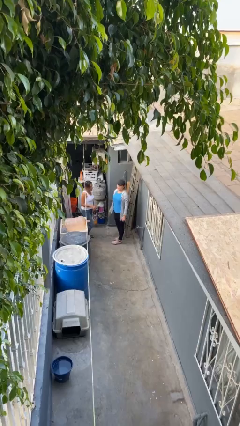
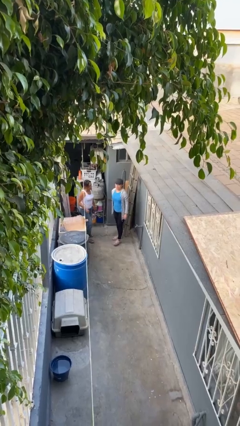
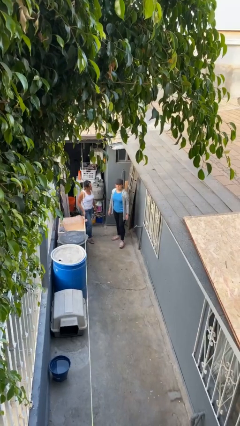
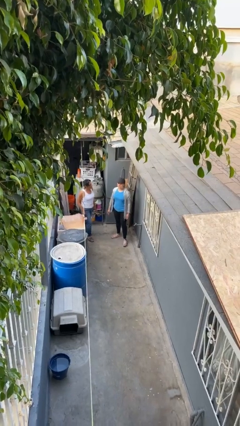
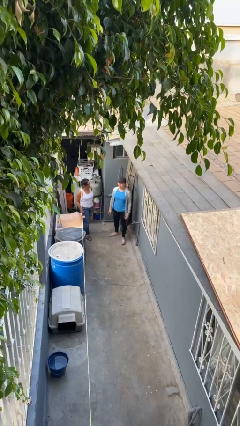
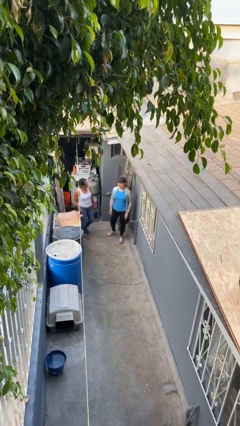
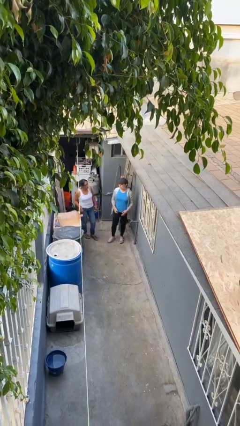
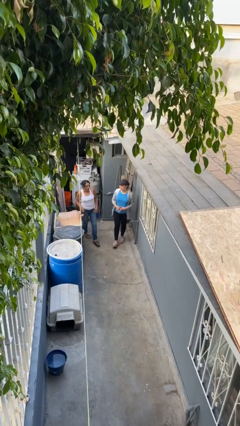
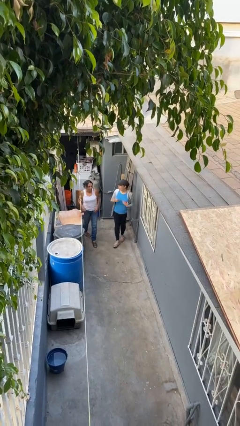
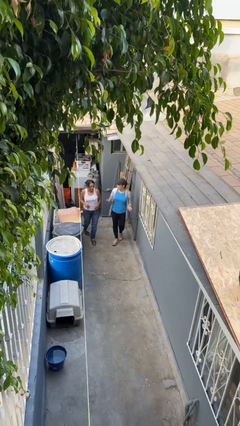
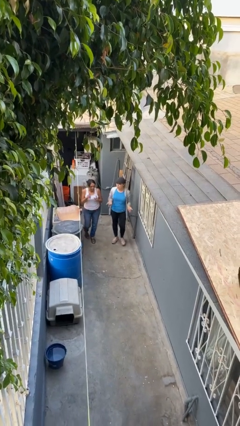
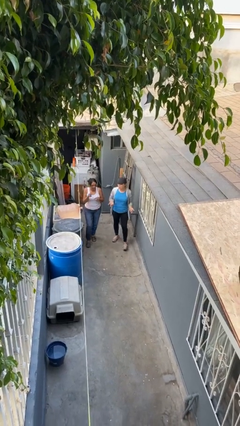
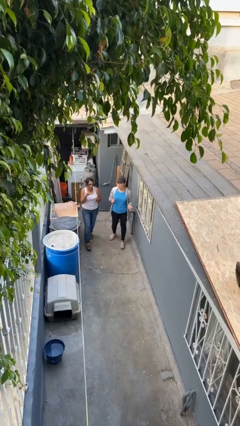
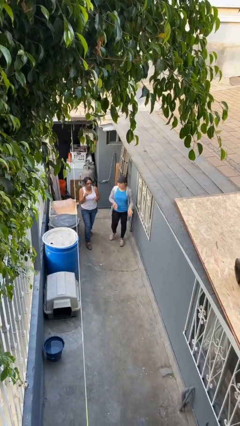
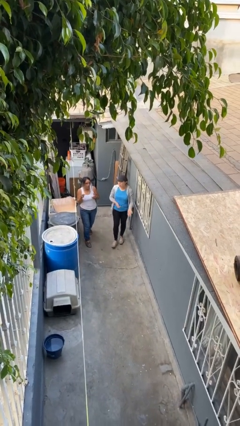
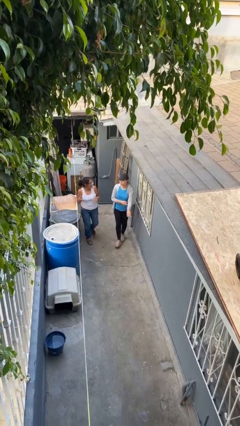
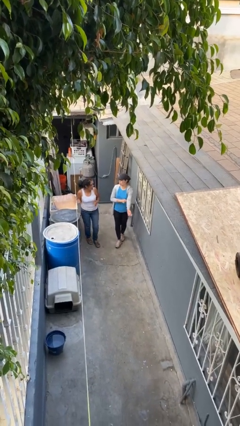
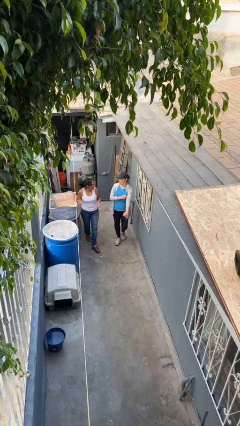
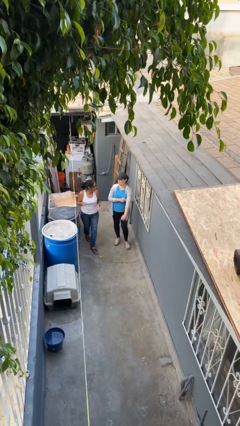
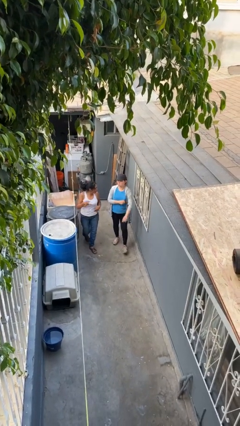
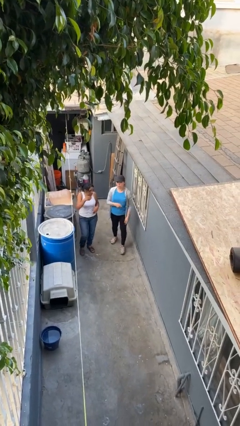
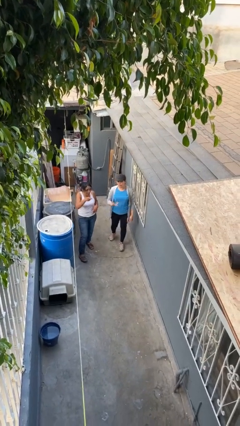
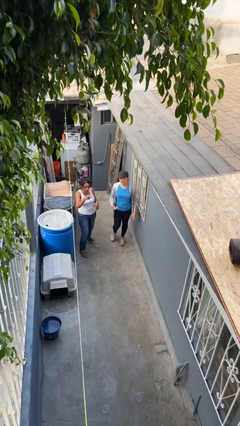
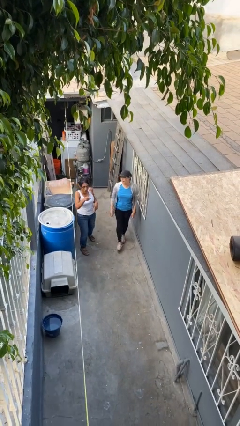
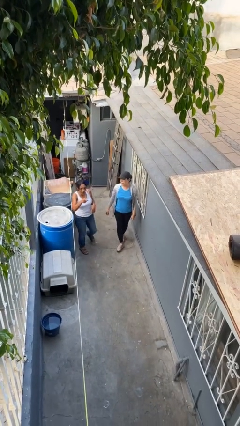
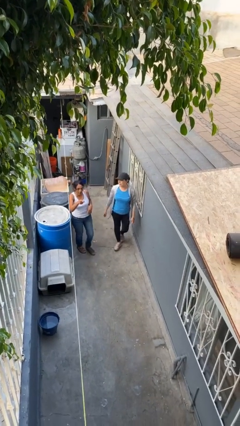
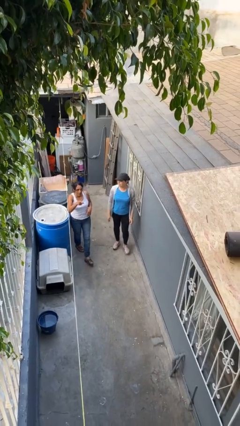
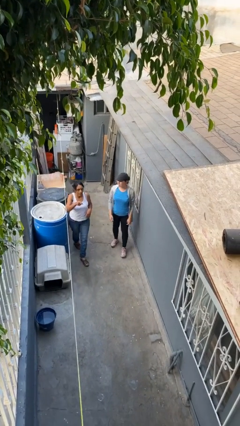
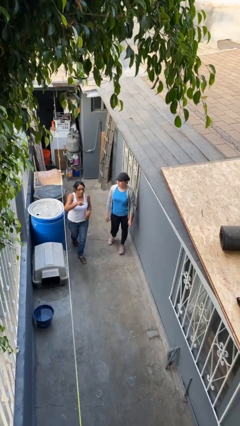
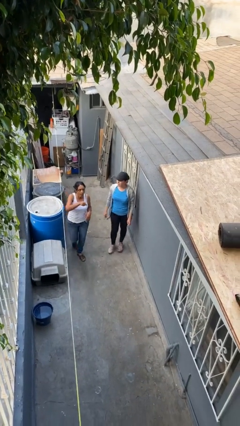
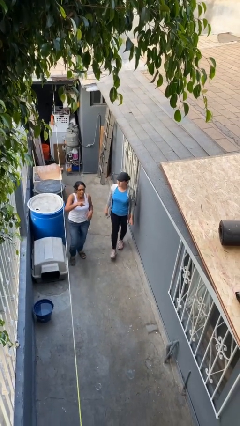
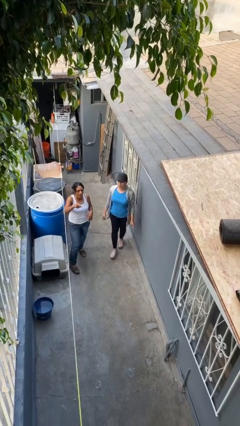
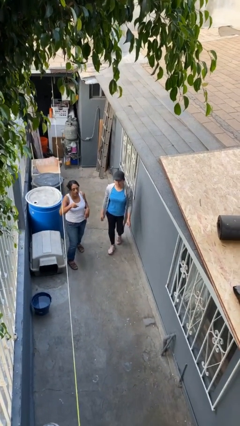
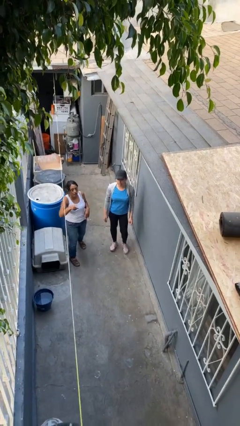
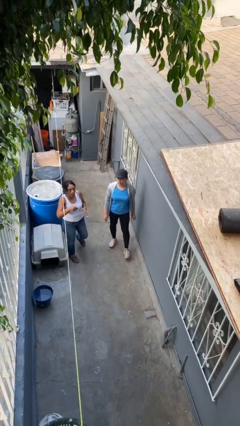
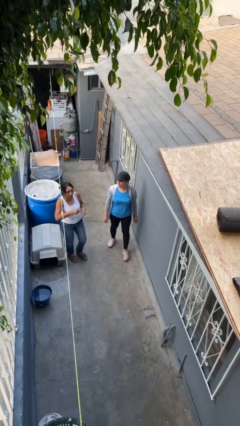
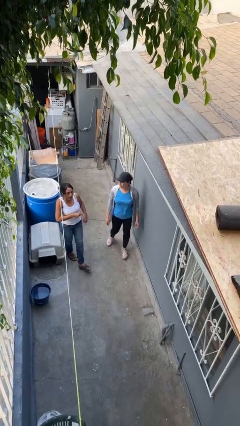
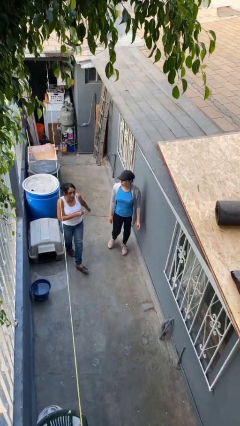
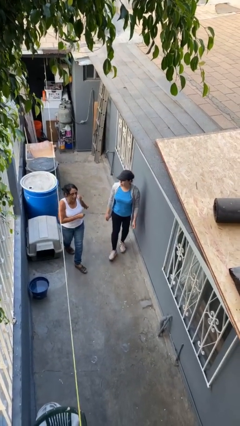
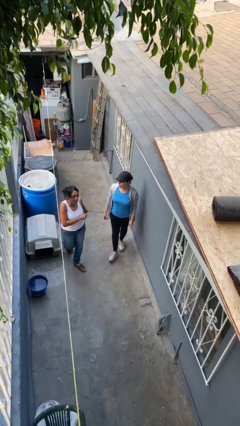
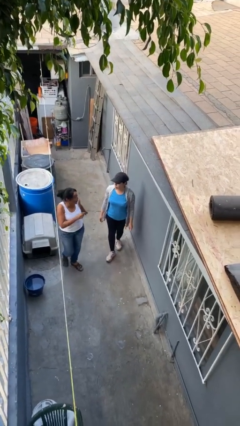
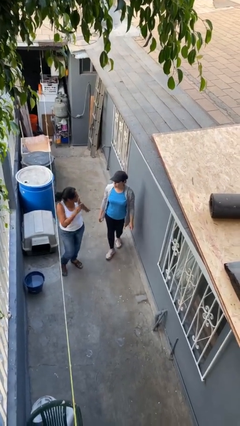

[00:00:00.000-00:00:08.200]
person talks to person

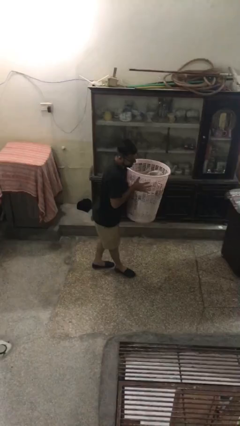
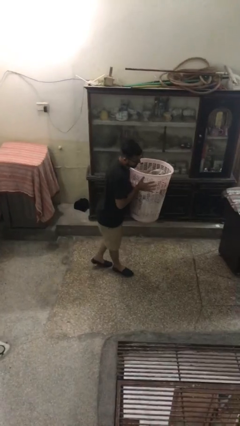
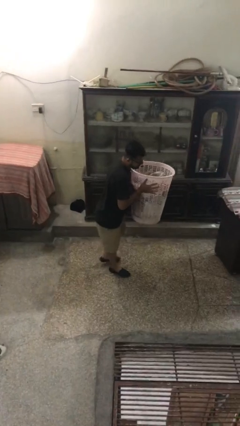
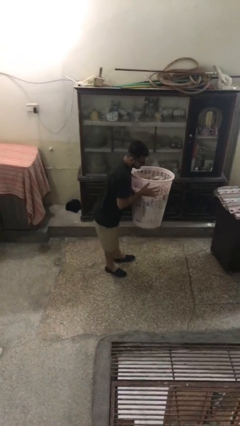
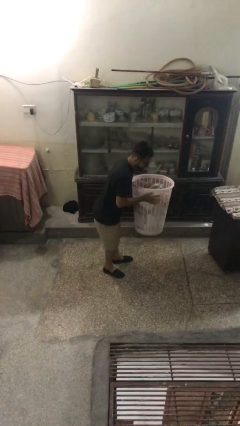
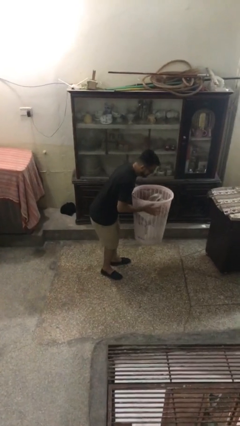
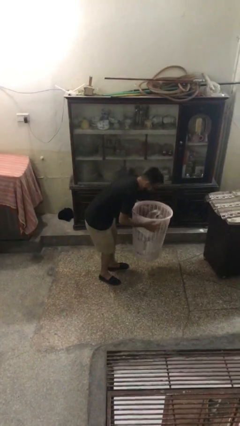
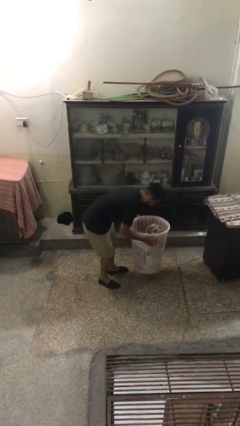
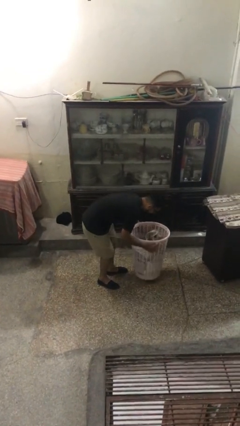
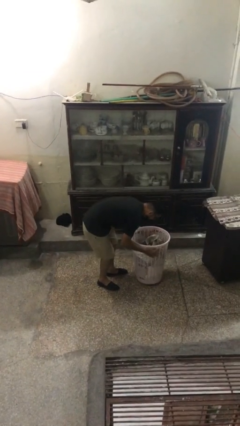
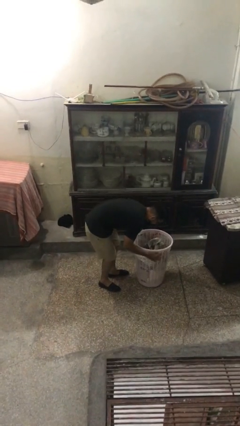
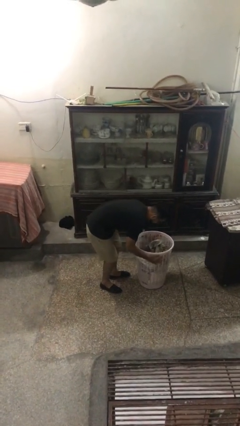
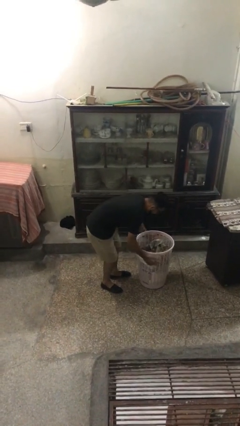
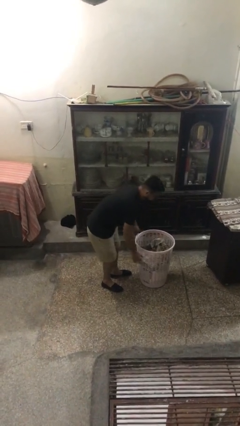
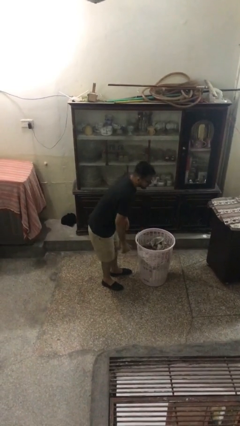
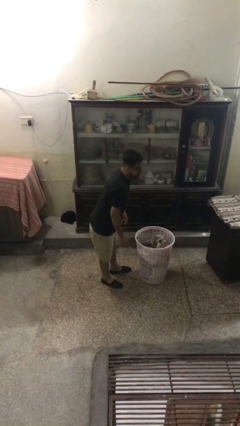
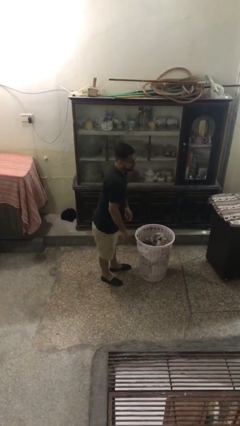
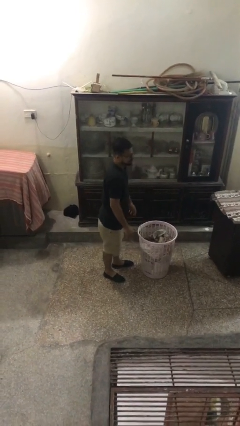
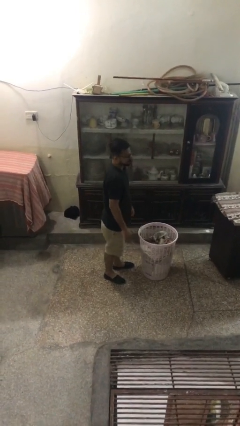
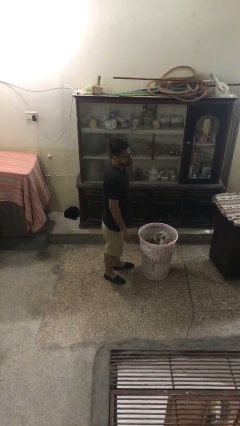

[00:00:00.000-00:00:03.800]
person puts down object on floor

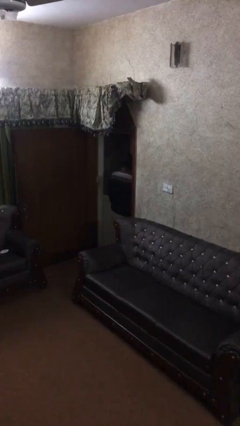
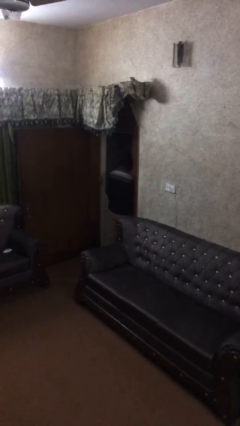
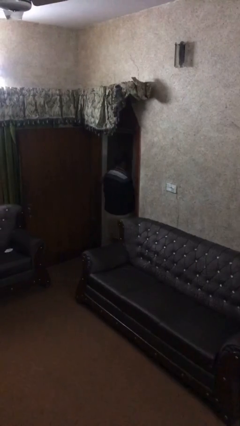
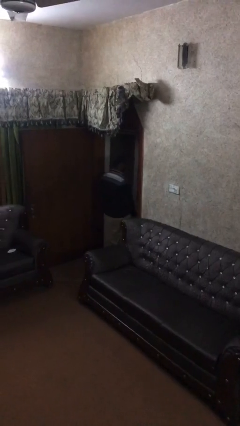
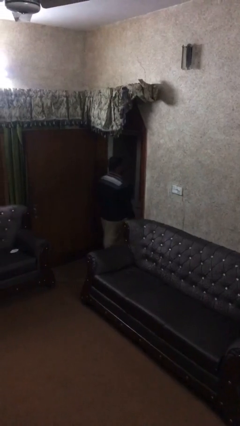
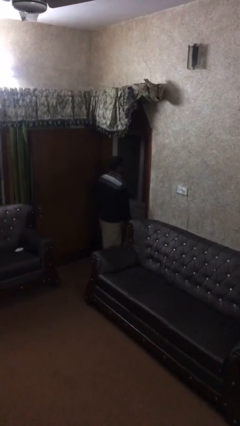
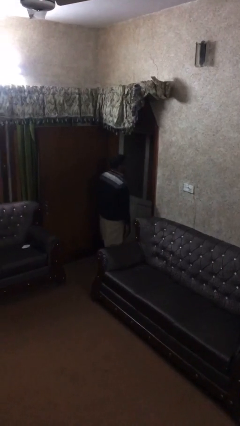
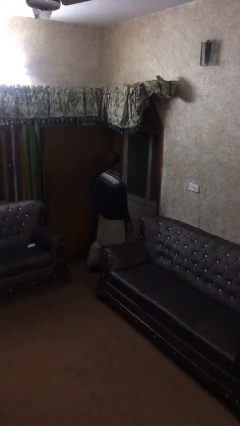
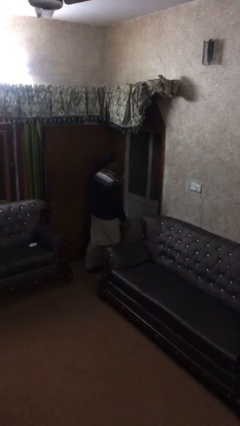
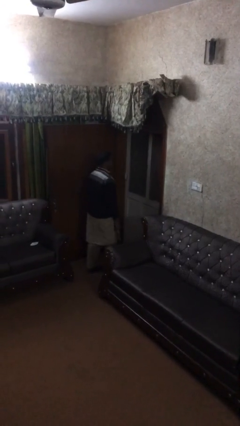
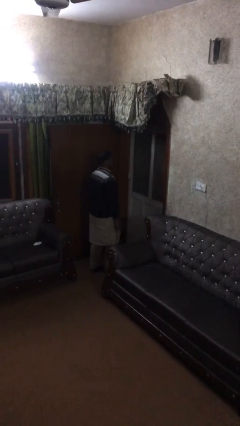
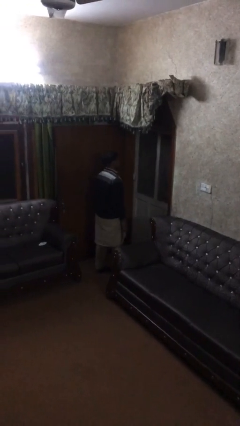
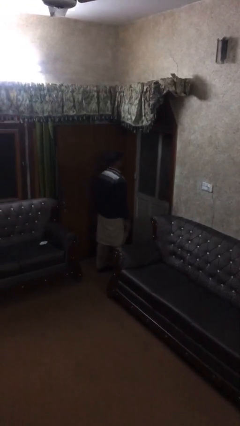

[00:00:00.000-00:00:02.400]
person closes facility door

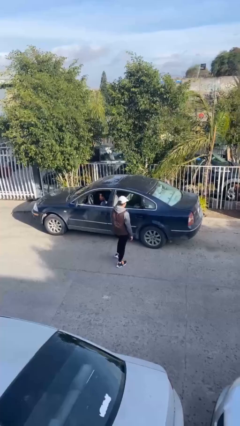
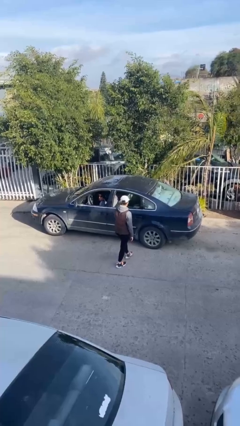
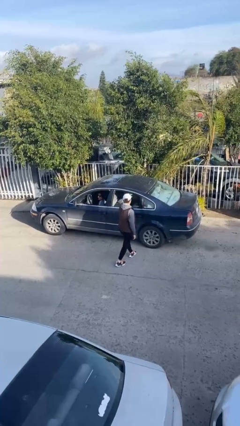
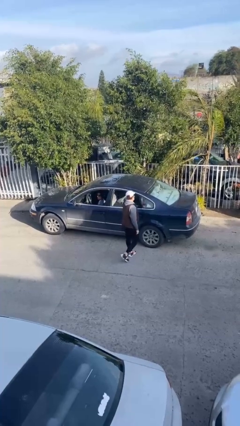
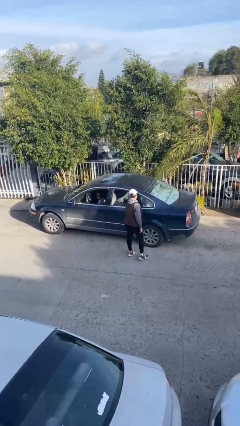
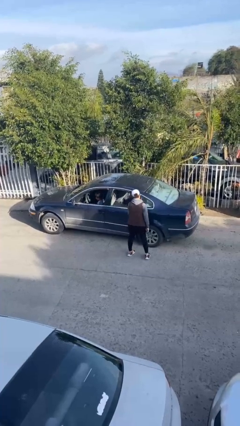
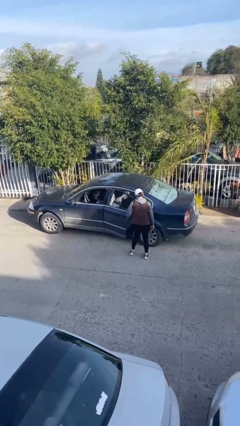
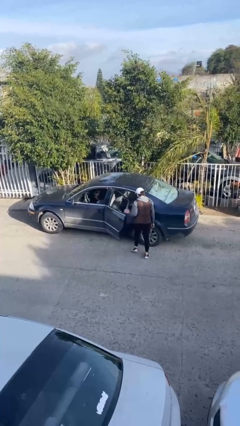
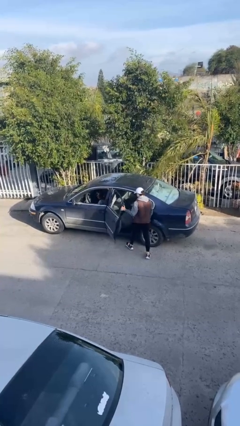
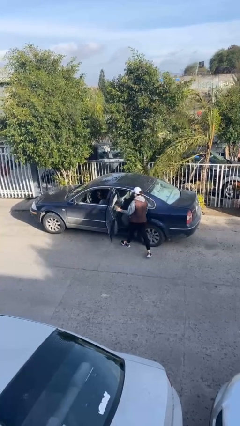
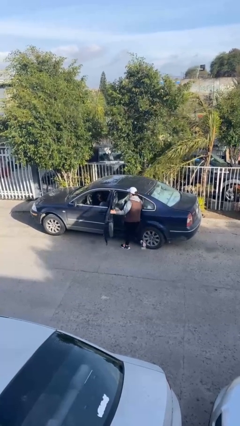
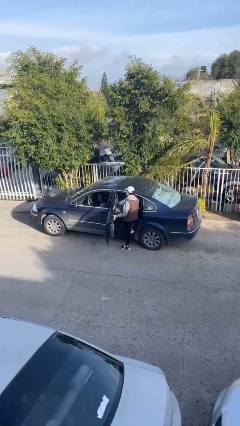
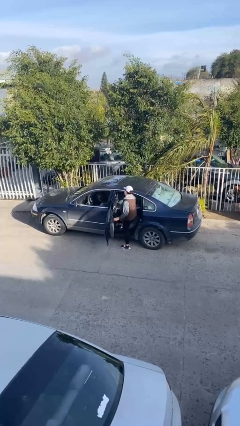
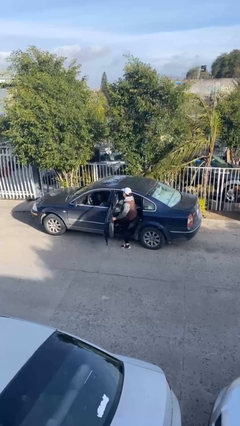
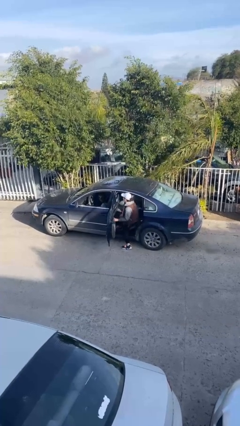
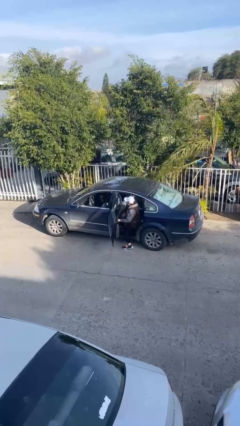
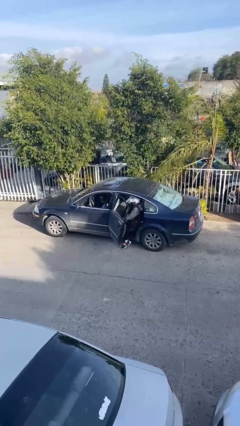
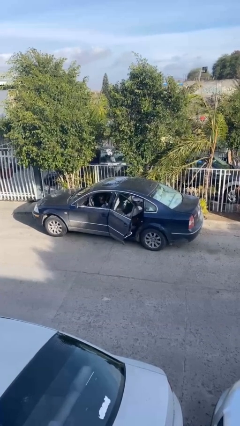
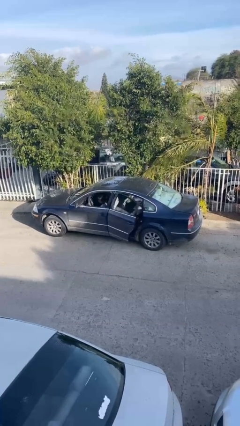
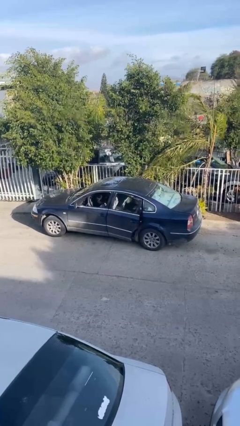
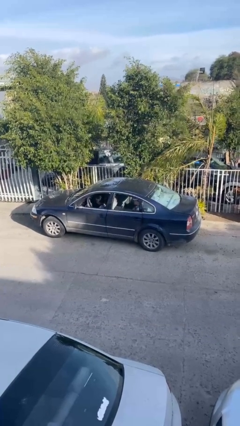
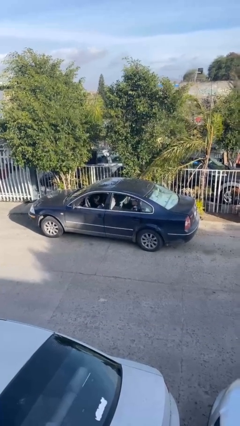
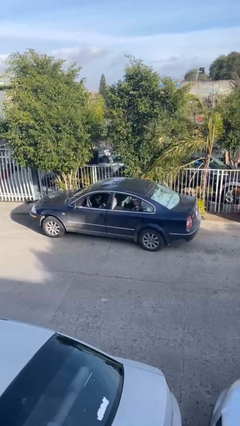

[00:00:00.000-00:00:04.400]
car picks up person
